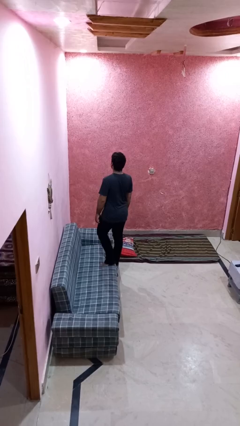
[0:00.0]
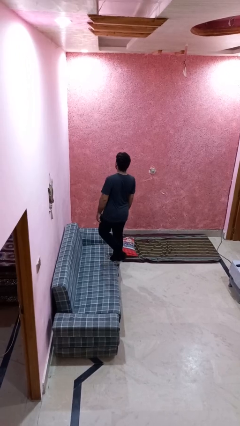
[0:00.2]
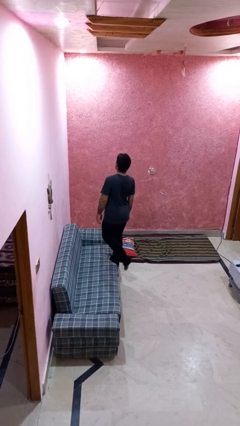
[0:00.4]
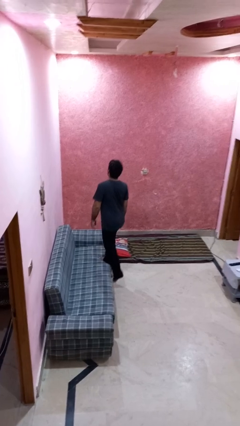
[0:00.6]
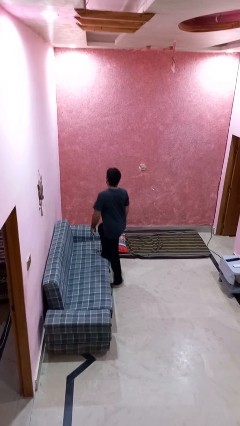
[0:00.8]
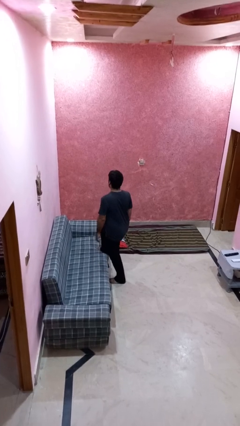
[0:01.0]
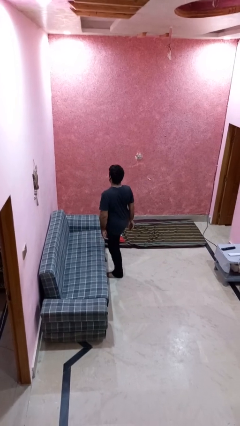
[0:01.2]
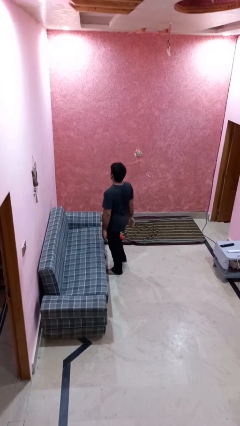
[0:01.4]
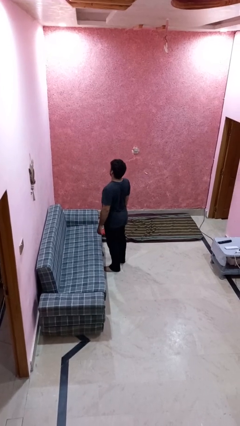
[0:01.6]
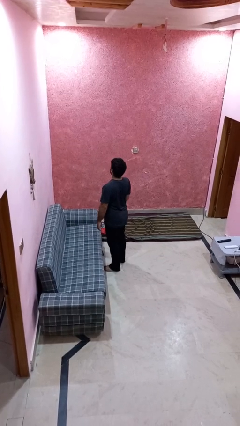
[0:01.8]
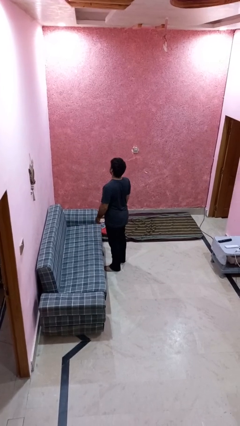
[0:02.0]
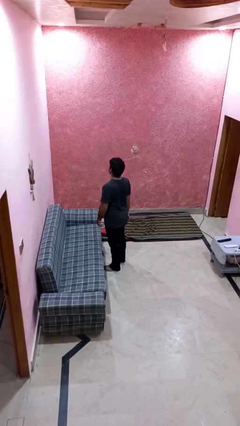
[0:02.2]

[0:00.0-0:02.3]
person climbs off couch

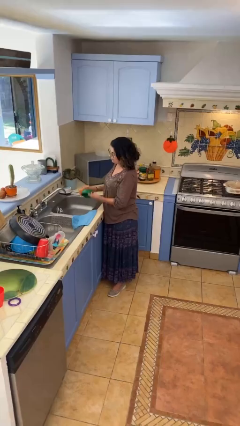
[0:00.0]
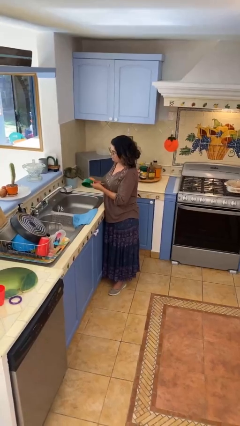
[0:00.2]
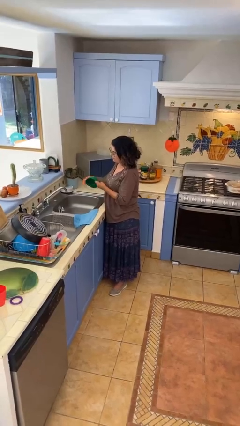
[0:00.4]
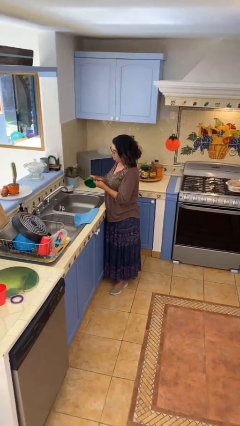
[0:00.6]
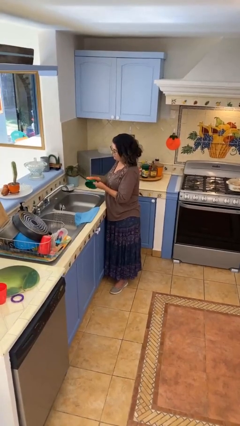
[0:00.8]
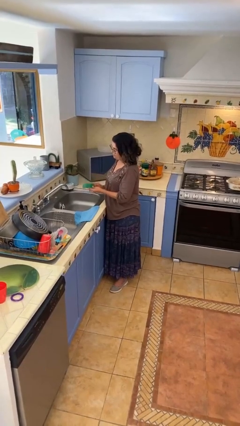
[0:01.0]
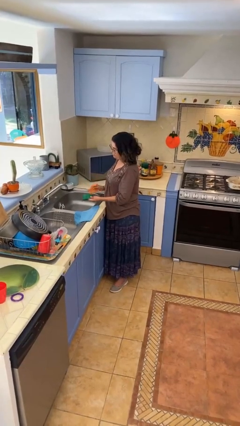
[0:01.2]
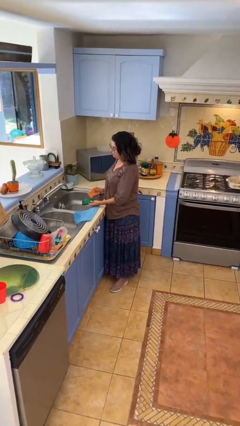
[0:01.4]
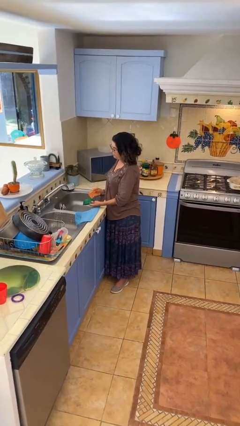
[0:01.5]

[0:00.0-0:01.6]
person washes dish

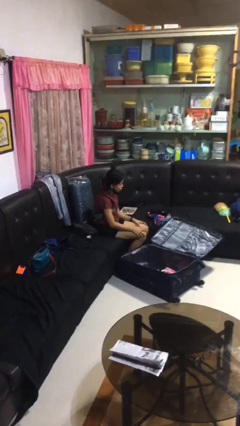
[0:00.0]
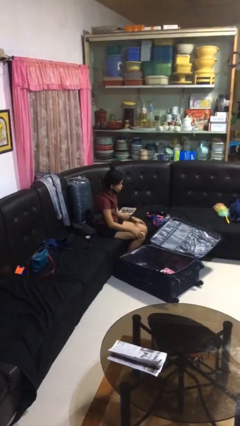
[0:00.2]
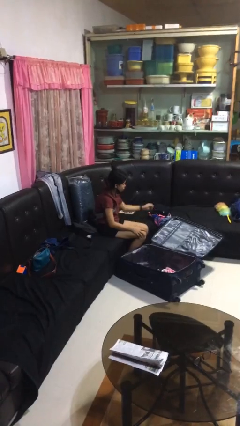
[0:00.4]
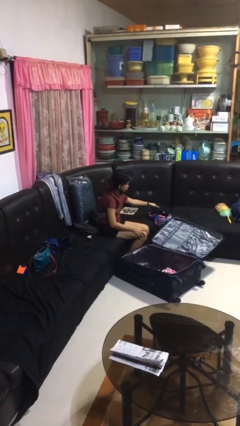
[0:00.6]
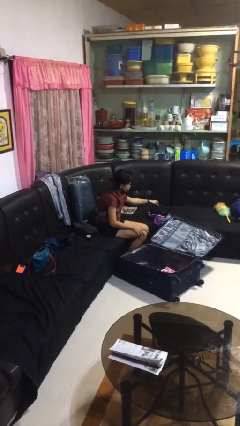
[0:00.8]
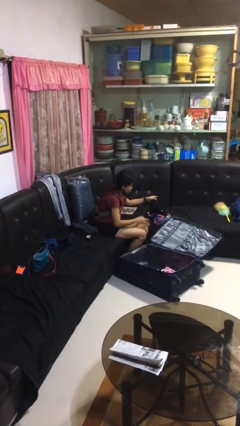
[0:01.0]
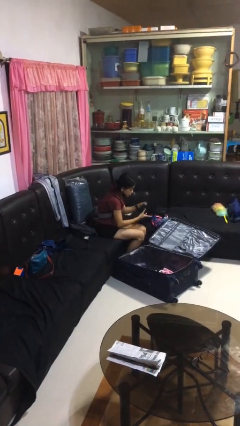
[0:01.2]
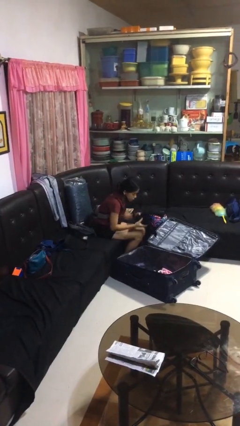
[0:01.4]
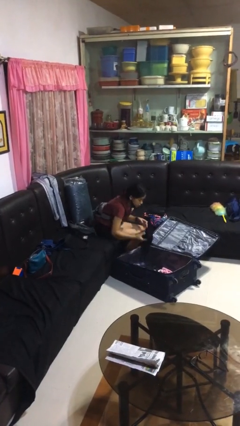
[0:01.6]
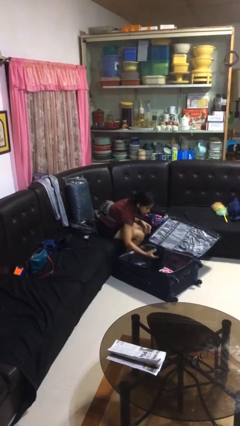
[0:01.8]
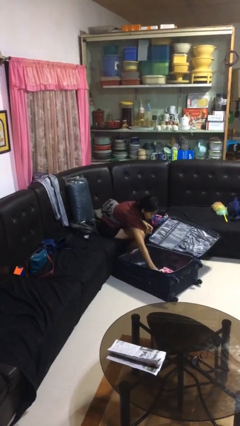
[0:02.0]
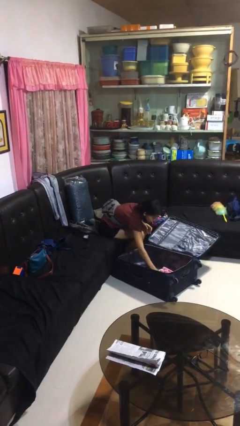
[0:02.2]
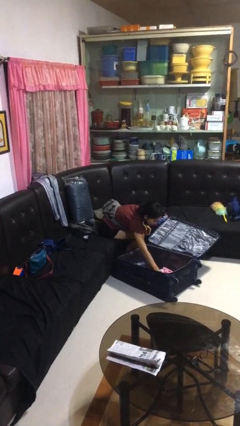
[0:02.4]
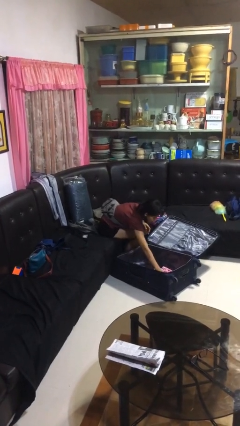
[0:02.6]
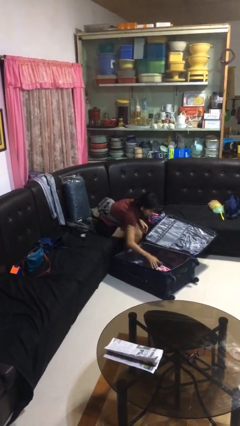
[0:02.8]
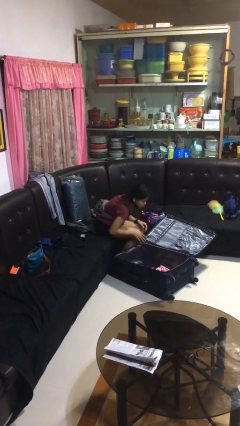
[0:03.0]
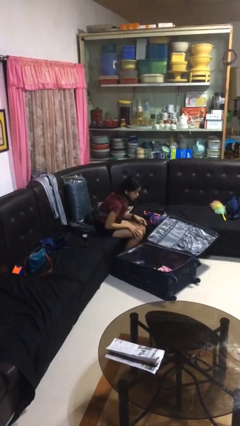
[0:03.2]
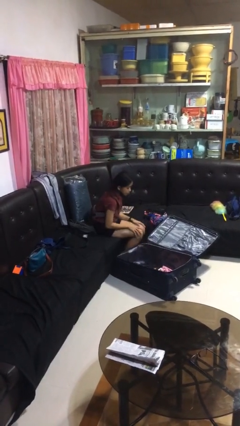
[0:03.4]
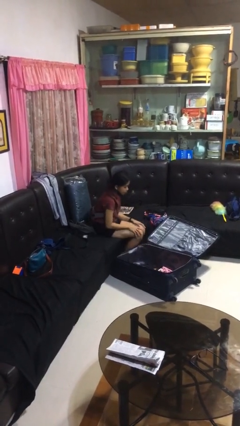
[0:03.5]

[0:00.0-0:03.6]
person loads clothes into suitcase

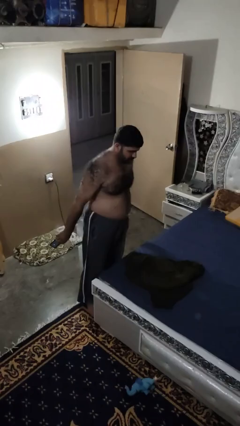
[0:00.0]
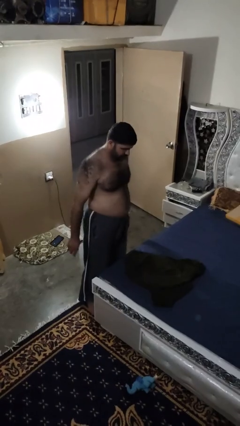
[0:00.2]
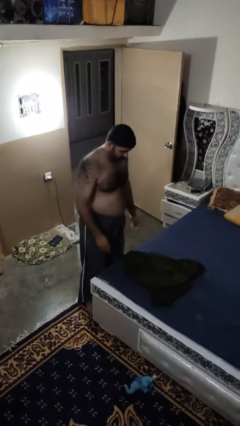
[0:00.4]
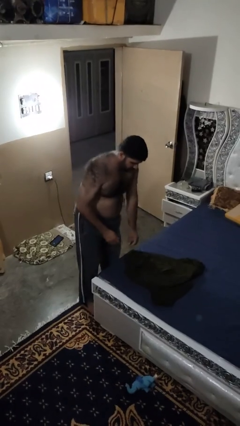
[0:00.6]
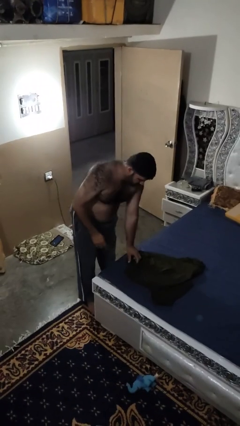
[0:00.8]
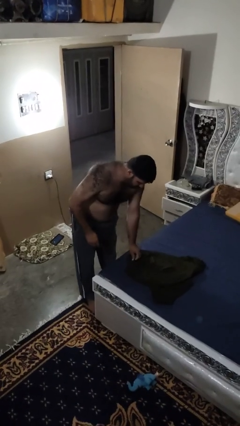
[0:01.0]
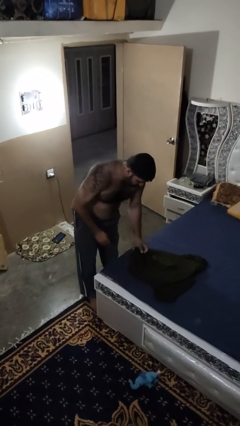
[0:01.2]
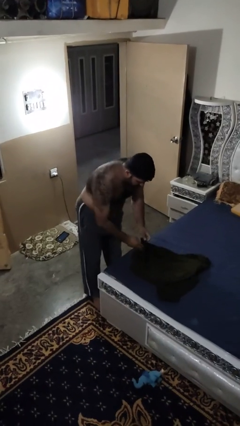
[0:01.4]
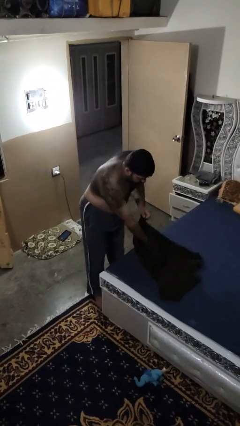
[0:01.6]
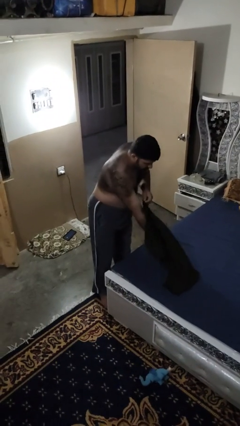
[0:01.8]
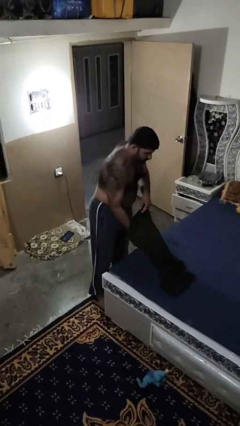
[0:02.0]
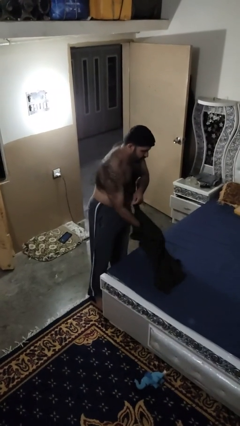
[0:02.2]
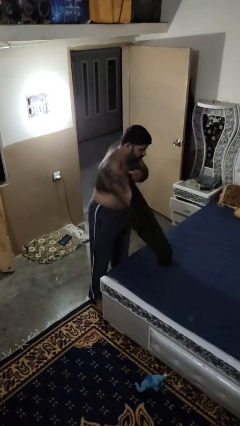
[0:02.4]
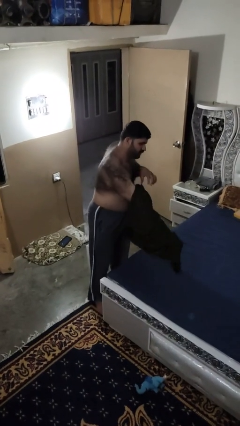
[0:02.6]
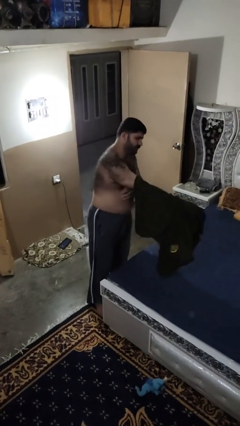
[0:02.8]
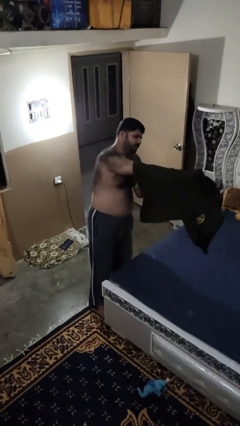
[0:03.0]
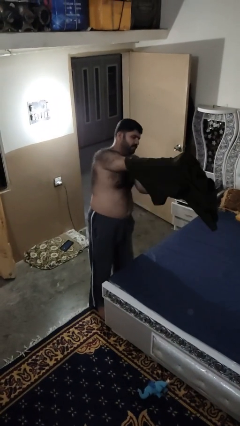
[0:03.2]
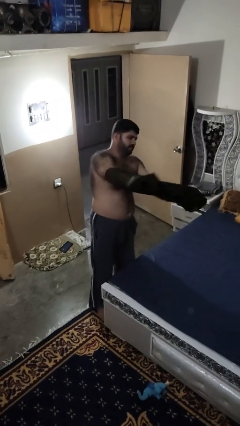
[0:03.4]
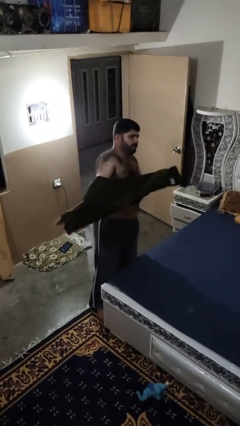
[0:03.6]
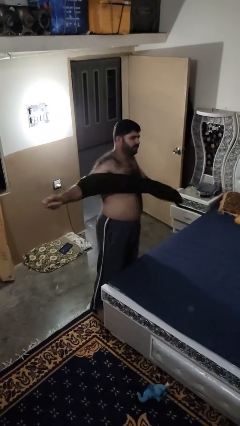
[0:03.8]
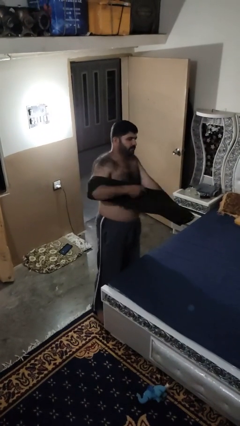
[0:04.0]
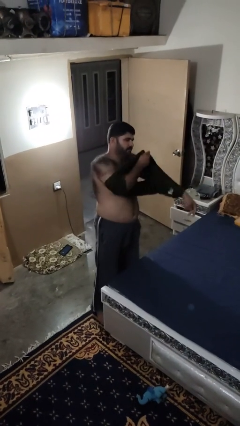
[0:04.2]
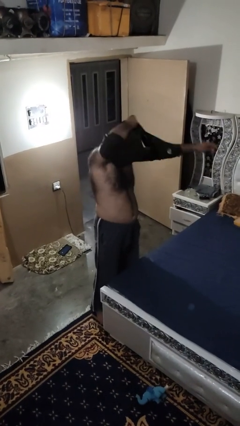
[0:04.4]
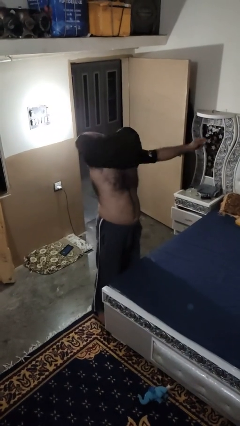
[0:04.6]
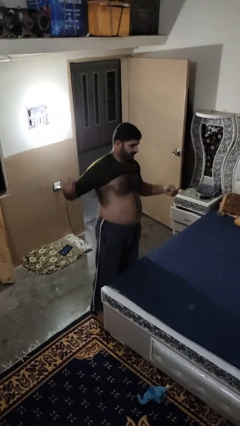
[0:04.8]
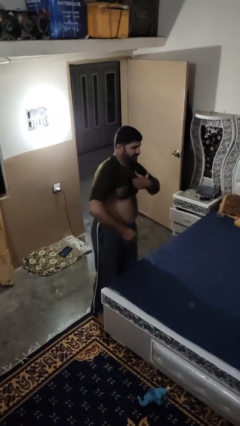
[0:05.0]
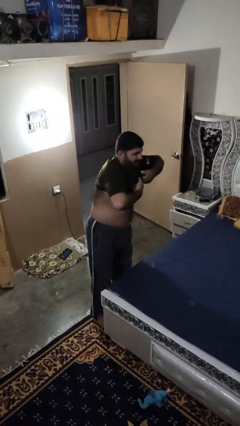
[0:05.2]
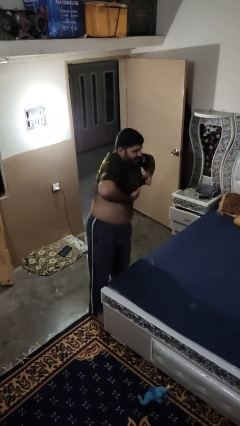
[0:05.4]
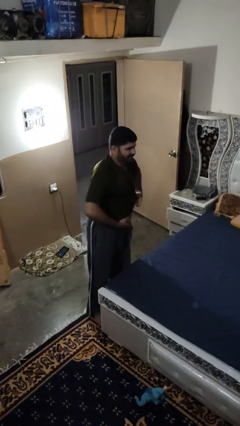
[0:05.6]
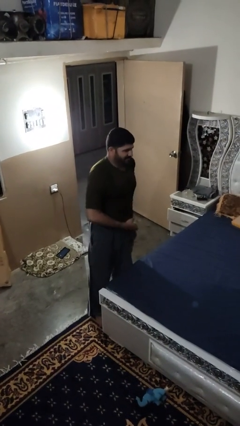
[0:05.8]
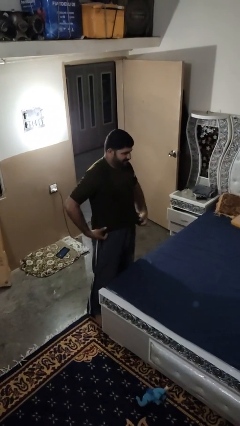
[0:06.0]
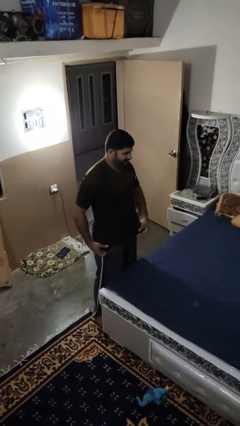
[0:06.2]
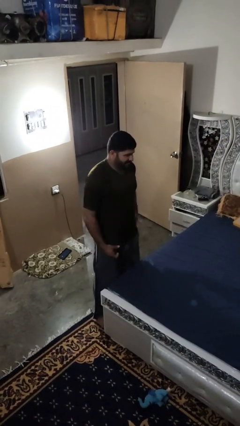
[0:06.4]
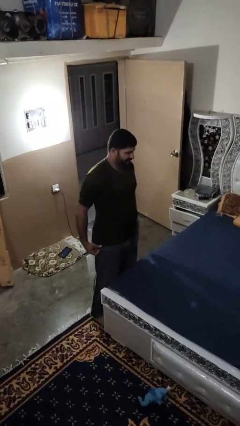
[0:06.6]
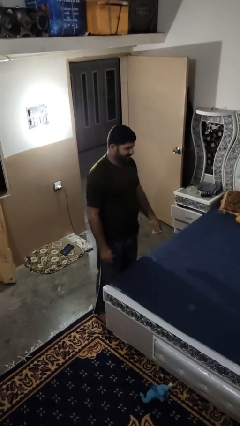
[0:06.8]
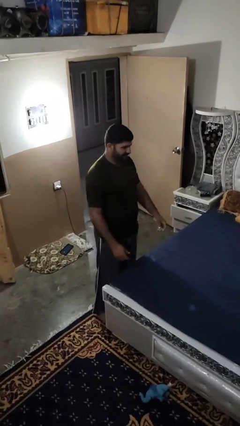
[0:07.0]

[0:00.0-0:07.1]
person puts on shirt

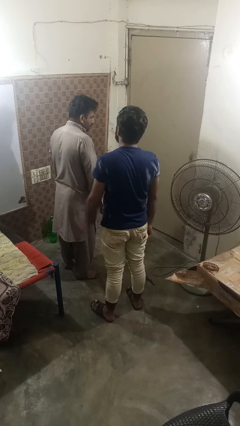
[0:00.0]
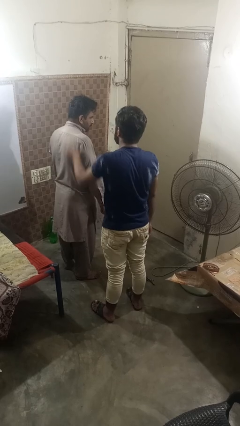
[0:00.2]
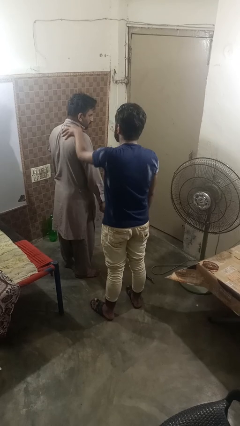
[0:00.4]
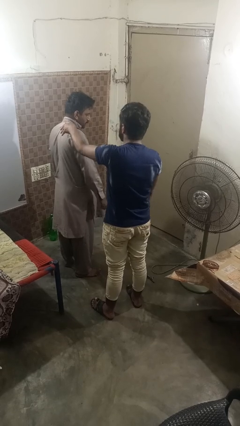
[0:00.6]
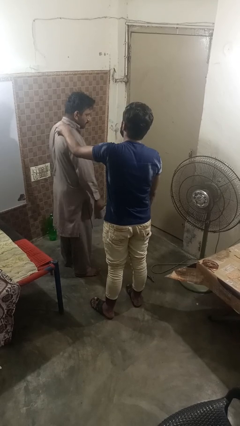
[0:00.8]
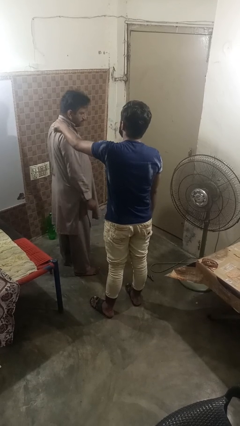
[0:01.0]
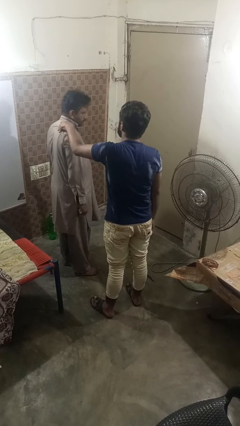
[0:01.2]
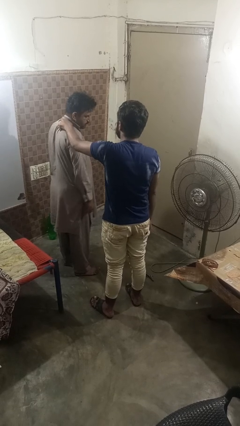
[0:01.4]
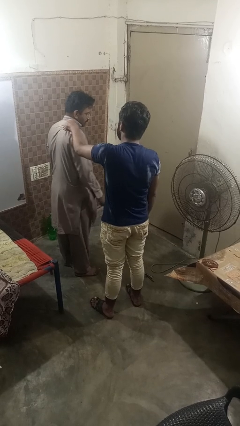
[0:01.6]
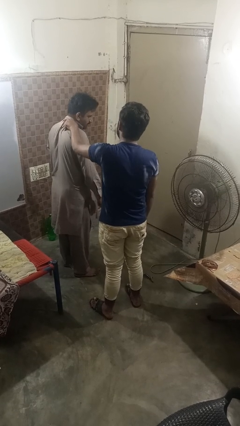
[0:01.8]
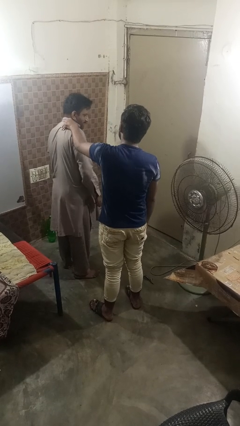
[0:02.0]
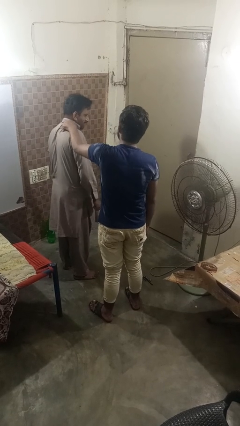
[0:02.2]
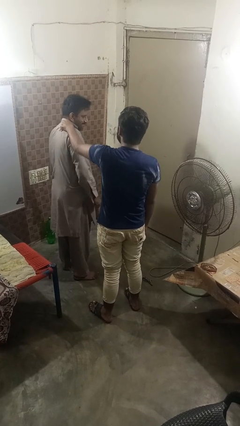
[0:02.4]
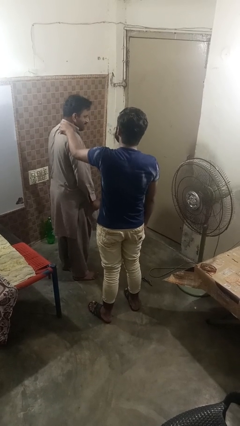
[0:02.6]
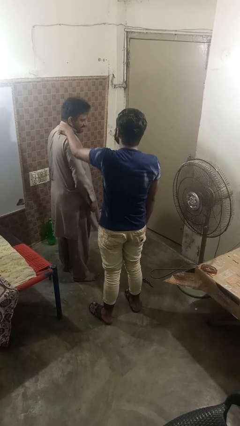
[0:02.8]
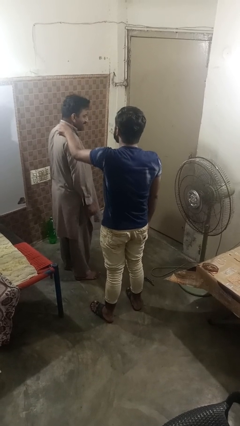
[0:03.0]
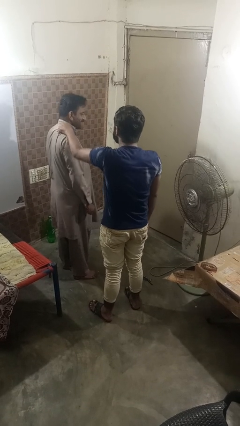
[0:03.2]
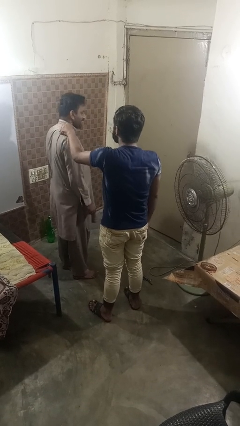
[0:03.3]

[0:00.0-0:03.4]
person grabs person by shoulder
